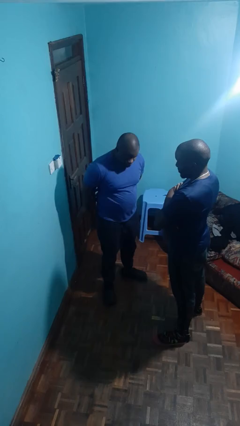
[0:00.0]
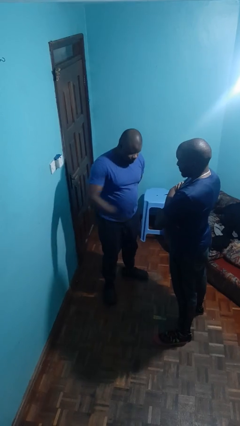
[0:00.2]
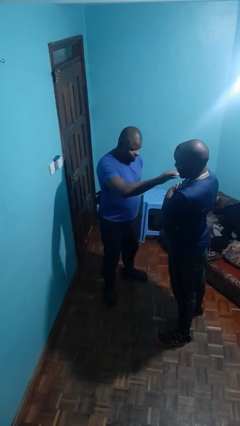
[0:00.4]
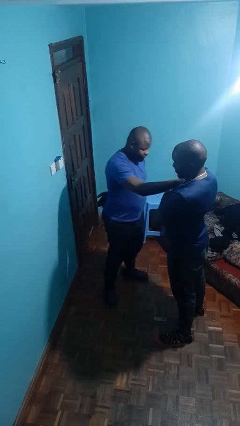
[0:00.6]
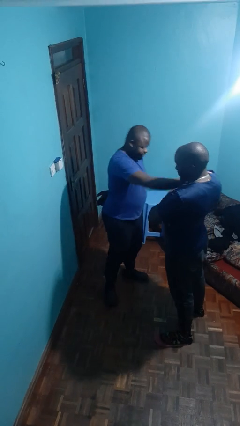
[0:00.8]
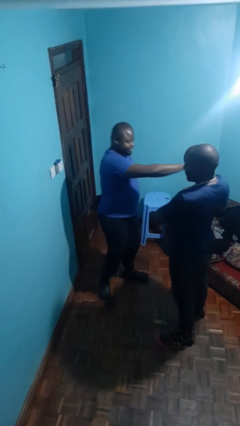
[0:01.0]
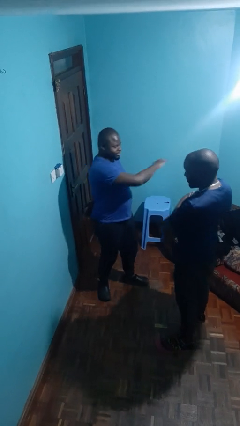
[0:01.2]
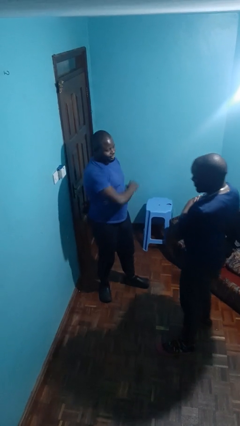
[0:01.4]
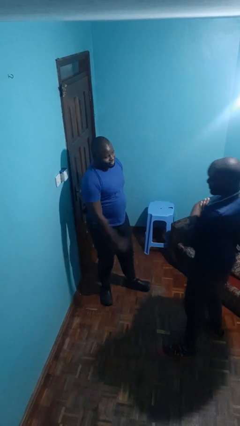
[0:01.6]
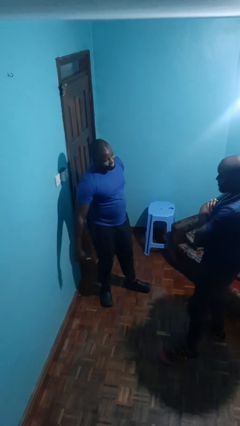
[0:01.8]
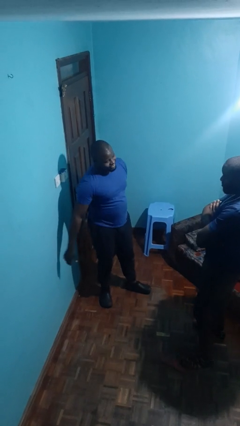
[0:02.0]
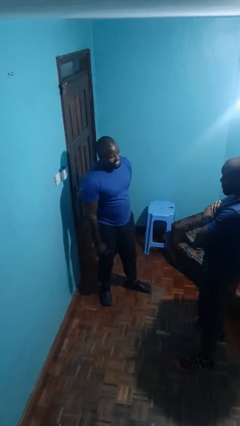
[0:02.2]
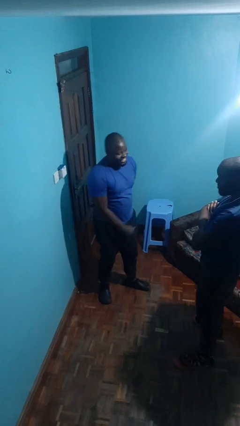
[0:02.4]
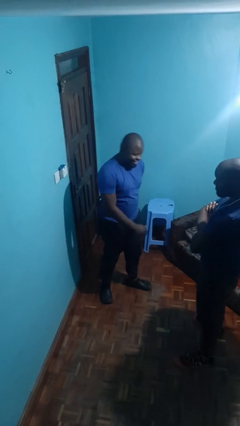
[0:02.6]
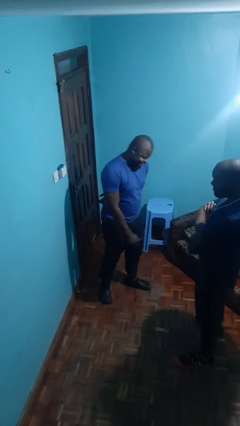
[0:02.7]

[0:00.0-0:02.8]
person shoves person

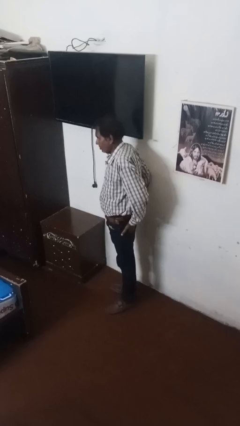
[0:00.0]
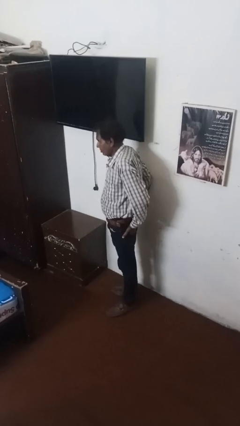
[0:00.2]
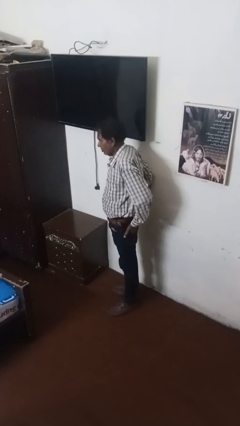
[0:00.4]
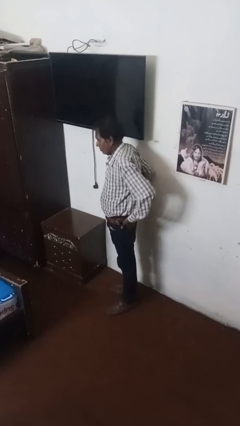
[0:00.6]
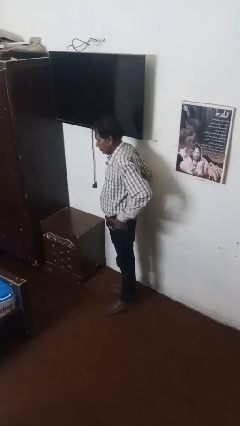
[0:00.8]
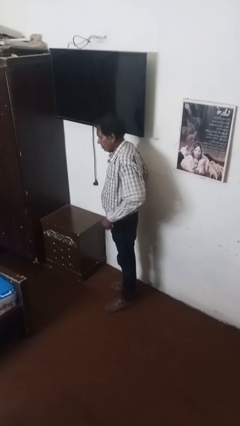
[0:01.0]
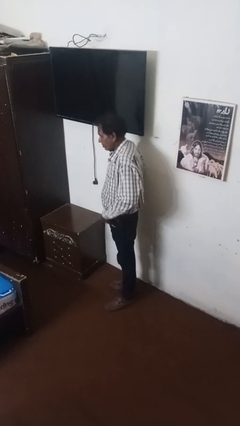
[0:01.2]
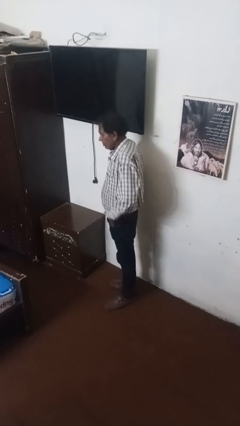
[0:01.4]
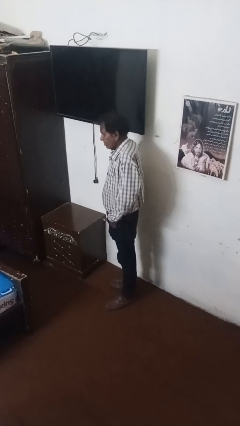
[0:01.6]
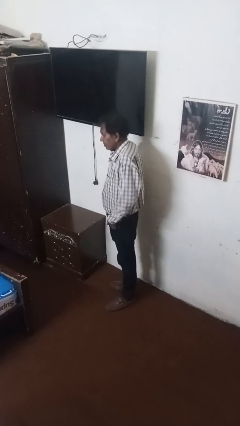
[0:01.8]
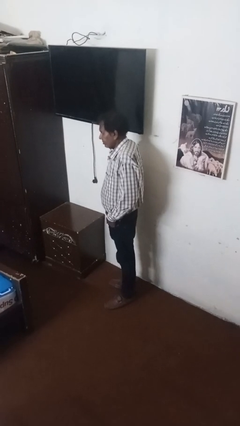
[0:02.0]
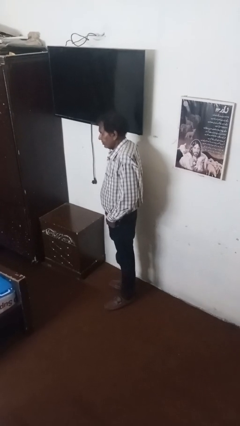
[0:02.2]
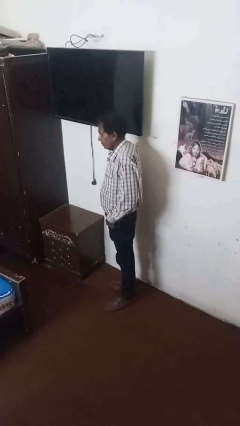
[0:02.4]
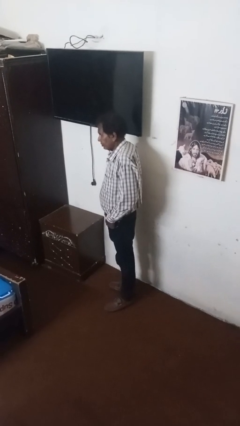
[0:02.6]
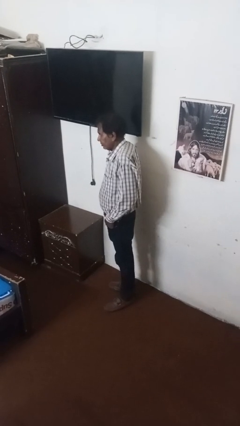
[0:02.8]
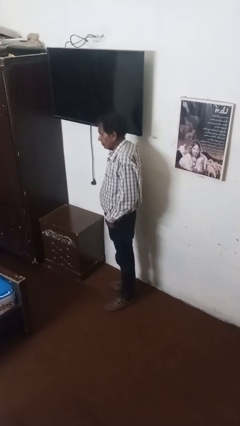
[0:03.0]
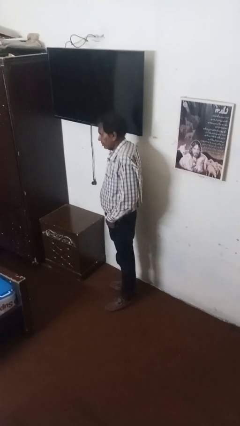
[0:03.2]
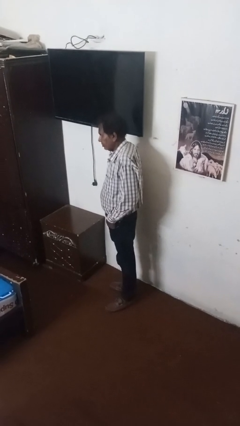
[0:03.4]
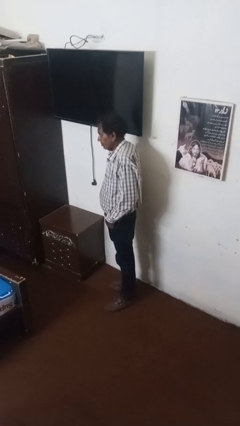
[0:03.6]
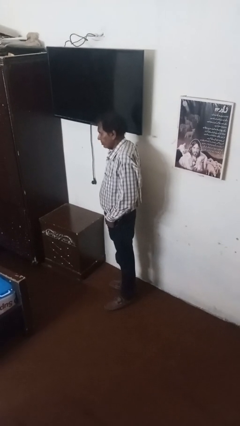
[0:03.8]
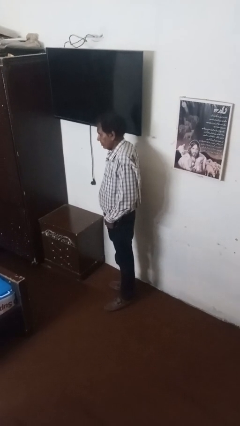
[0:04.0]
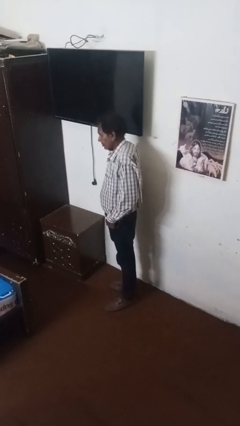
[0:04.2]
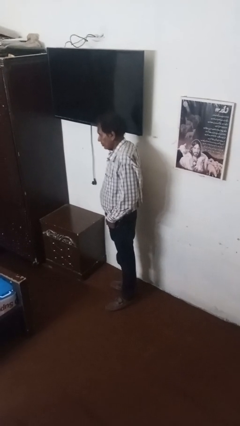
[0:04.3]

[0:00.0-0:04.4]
person puts hands in back pockets

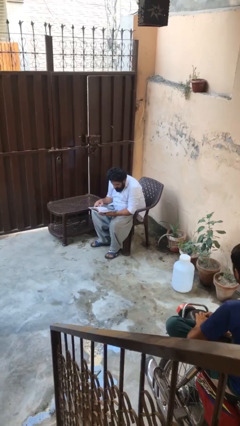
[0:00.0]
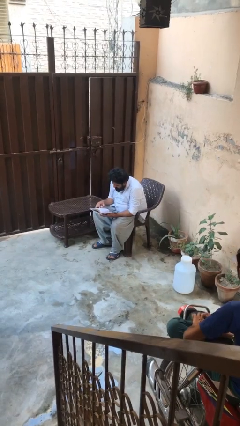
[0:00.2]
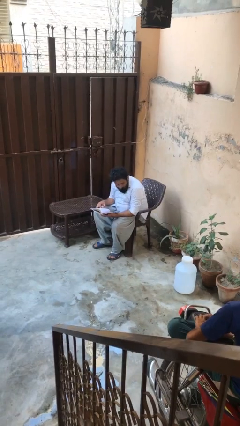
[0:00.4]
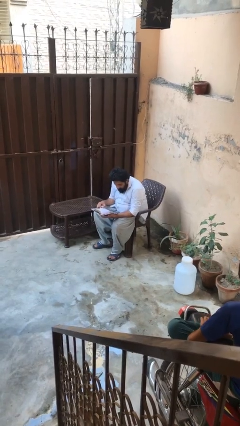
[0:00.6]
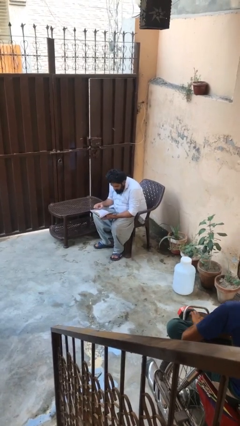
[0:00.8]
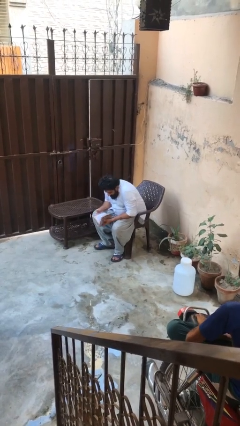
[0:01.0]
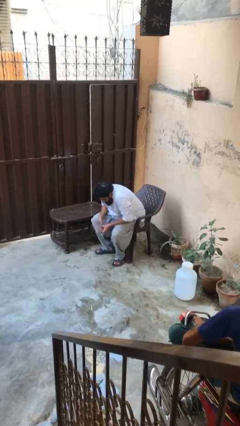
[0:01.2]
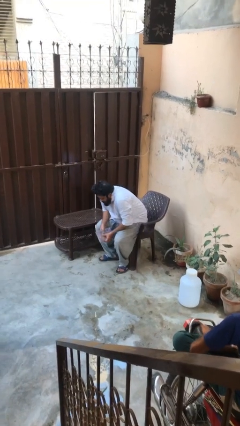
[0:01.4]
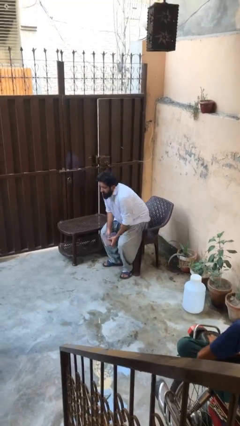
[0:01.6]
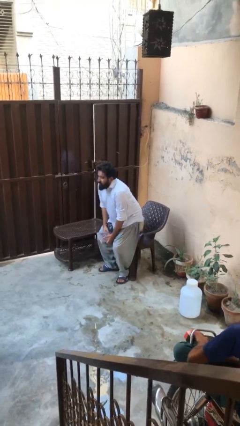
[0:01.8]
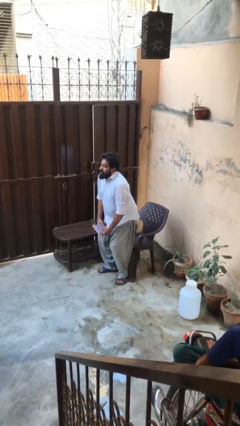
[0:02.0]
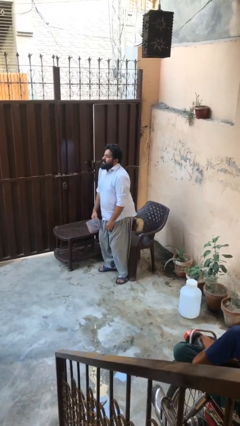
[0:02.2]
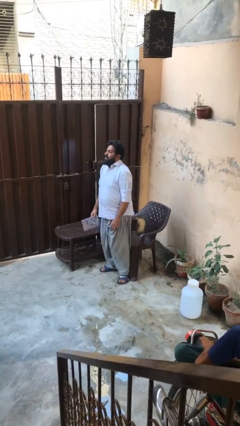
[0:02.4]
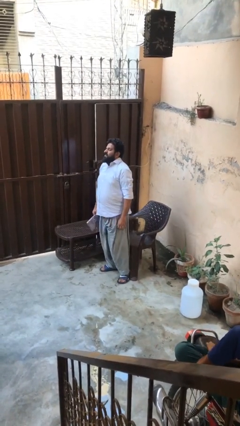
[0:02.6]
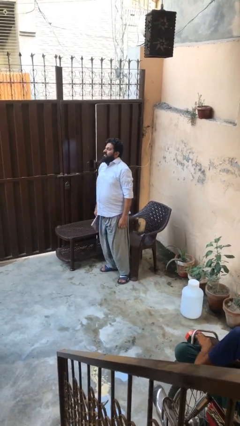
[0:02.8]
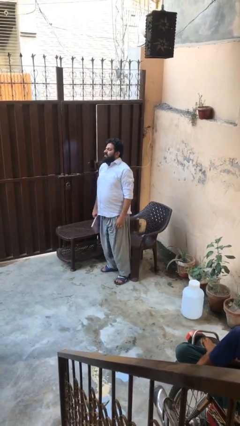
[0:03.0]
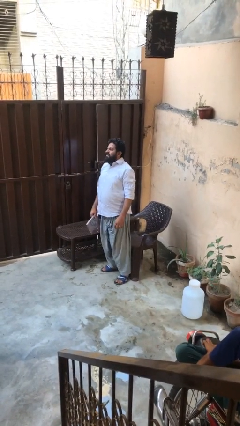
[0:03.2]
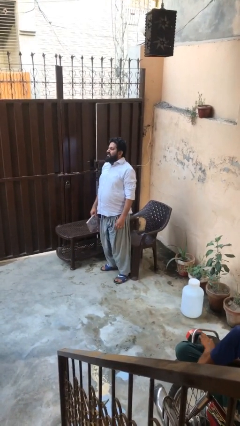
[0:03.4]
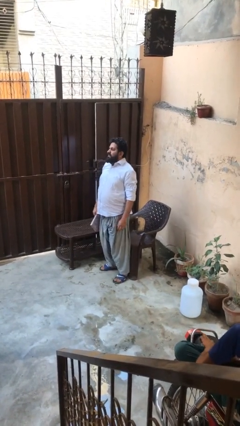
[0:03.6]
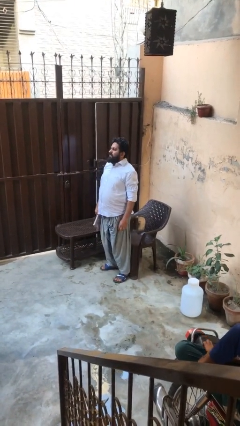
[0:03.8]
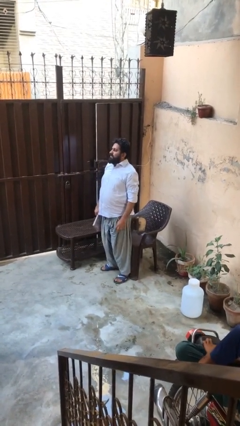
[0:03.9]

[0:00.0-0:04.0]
person stands up

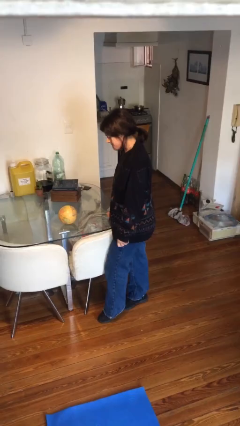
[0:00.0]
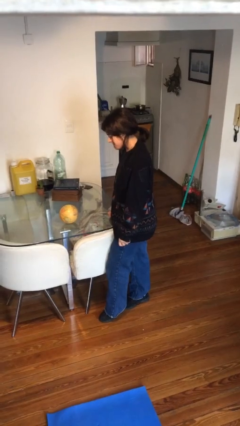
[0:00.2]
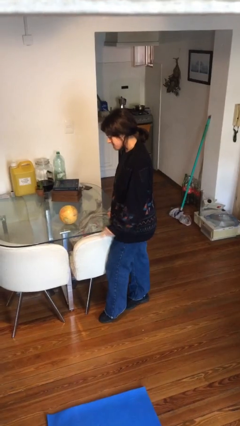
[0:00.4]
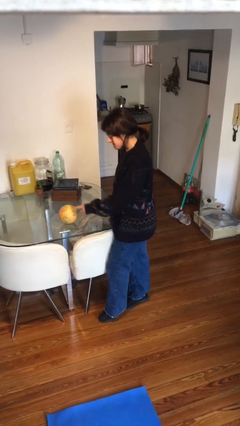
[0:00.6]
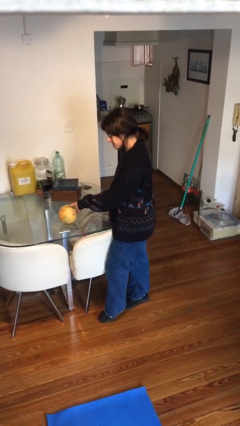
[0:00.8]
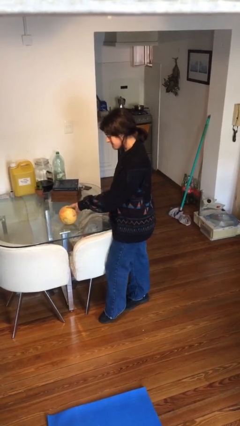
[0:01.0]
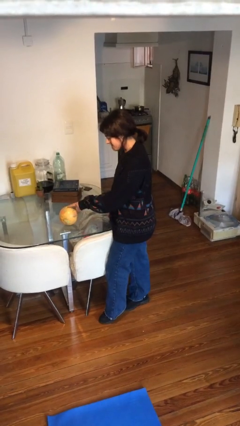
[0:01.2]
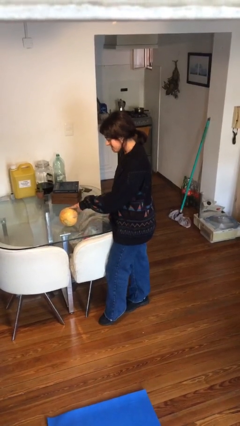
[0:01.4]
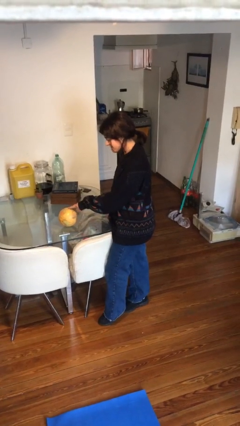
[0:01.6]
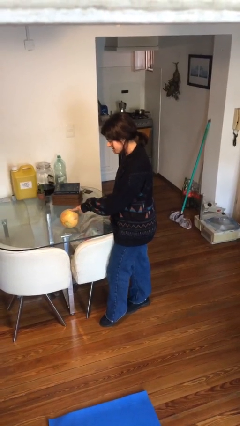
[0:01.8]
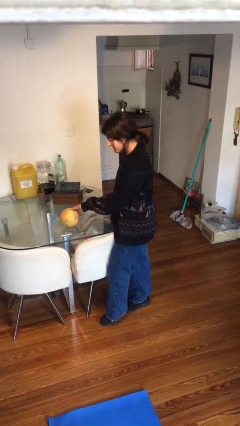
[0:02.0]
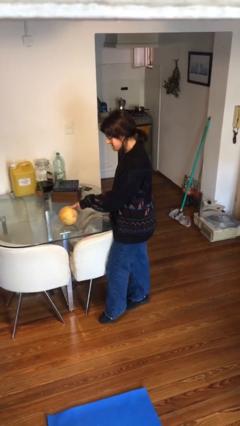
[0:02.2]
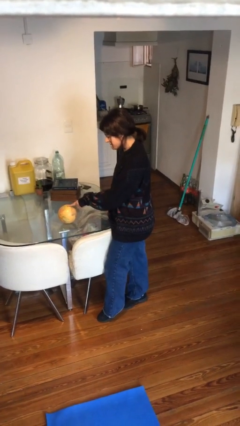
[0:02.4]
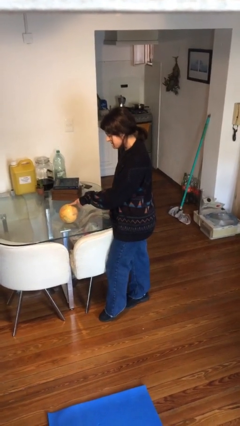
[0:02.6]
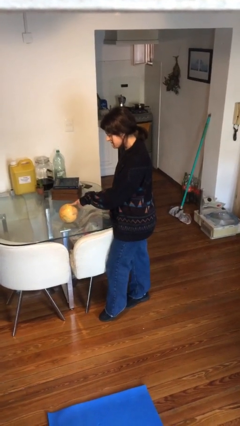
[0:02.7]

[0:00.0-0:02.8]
person taps object with finger

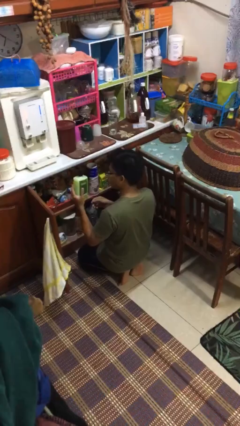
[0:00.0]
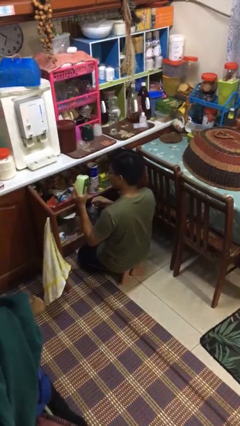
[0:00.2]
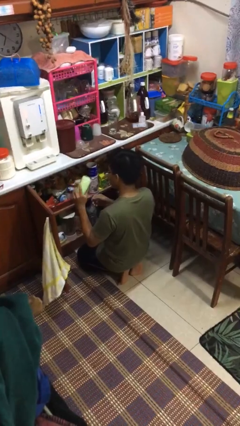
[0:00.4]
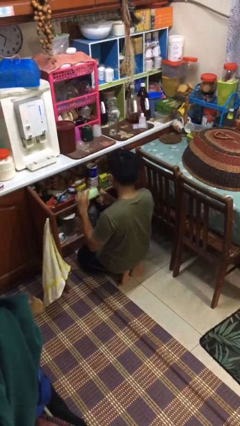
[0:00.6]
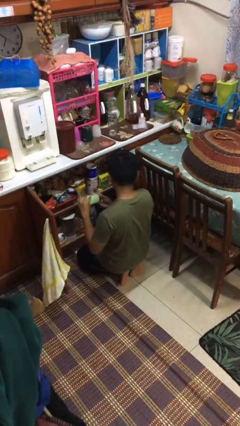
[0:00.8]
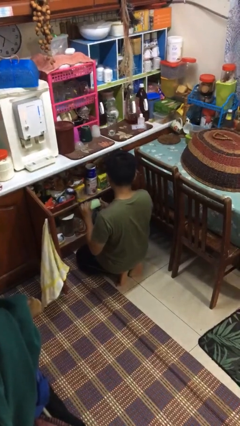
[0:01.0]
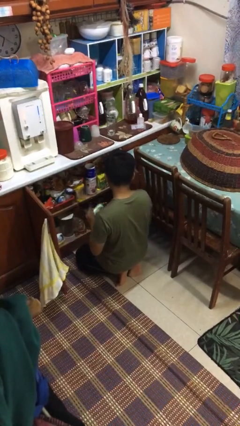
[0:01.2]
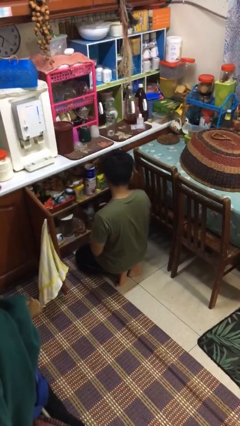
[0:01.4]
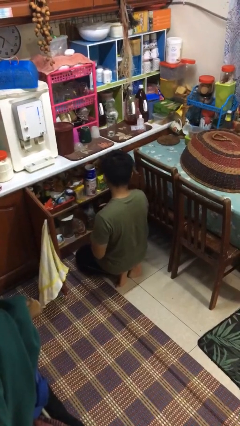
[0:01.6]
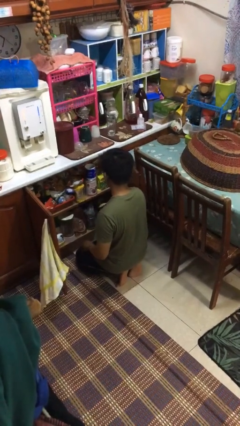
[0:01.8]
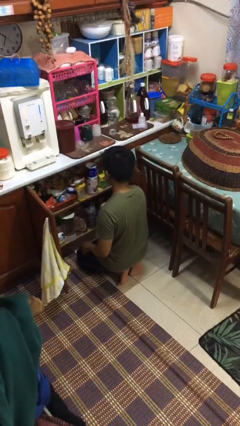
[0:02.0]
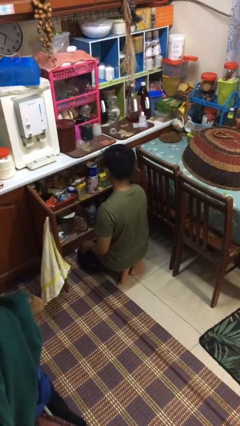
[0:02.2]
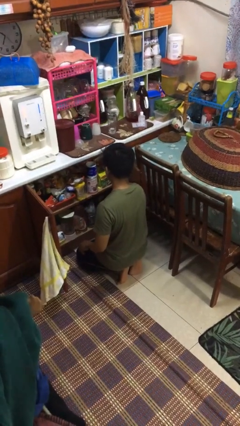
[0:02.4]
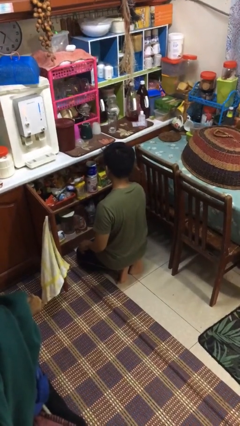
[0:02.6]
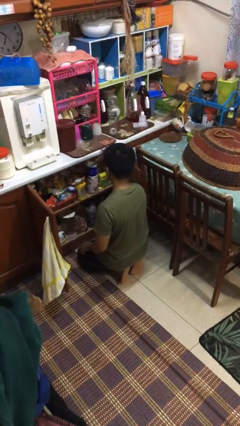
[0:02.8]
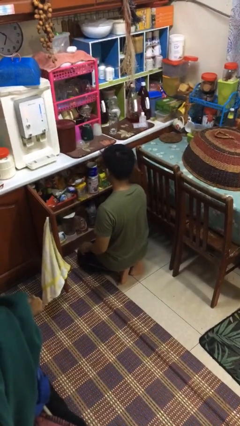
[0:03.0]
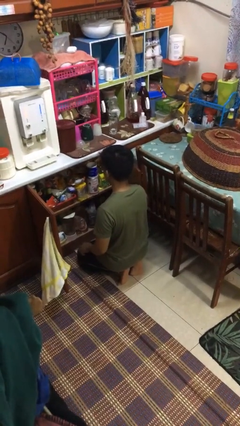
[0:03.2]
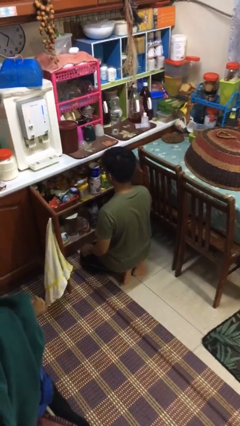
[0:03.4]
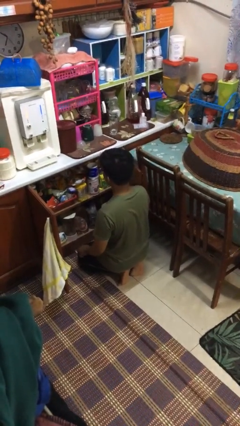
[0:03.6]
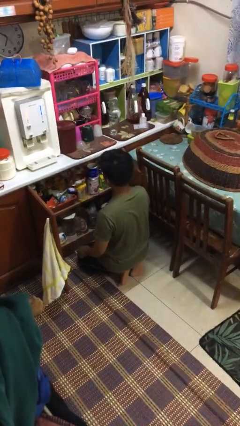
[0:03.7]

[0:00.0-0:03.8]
person puts object in cabinet
